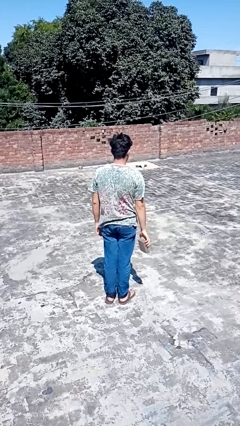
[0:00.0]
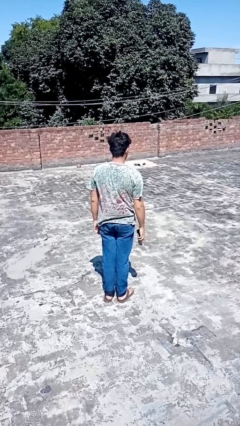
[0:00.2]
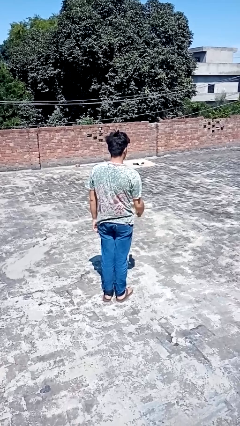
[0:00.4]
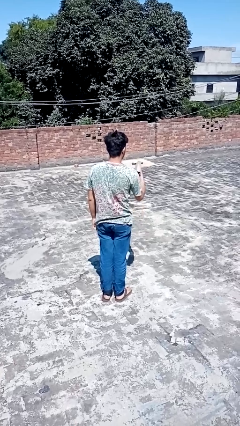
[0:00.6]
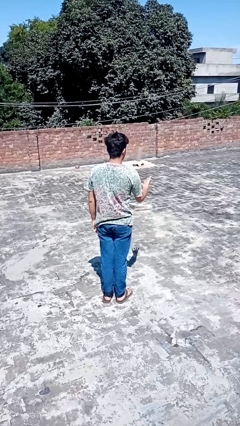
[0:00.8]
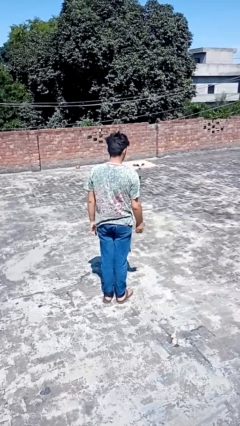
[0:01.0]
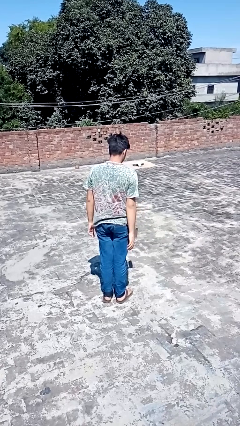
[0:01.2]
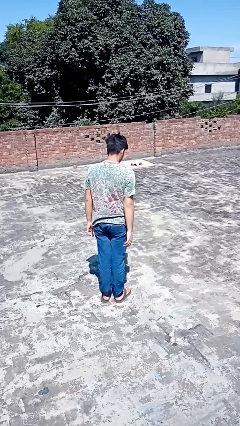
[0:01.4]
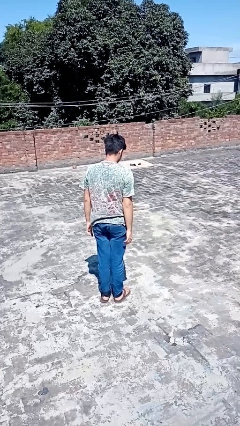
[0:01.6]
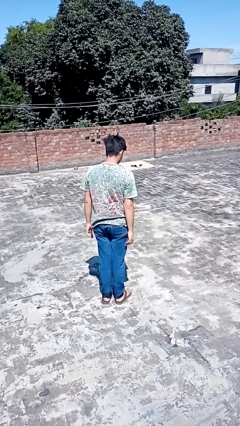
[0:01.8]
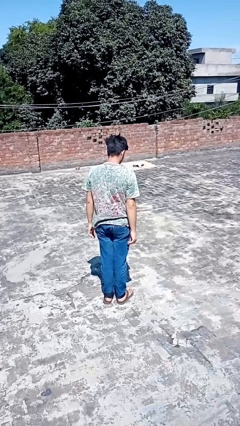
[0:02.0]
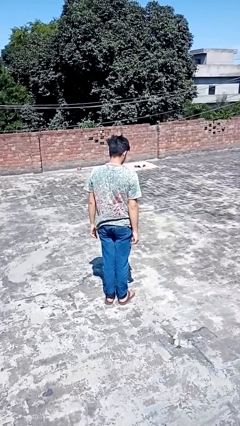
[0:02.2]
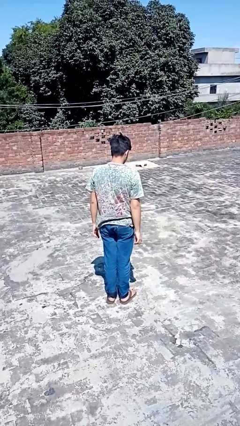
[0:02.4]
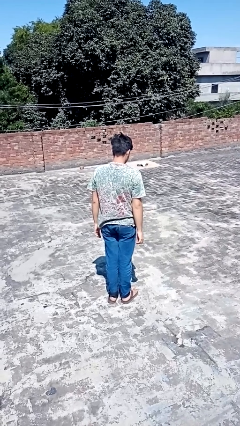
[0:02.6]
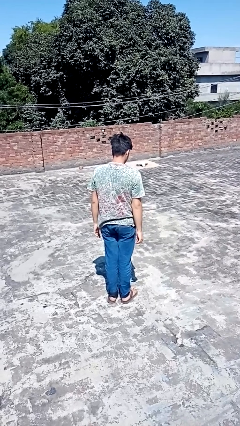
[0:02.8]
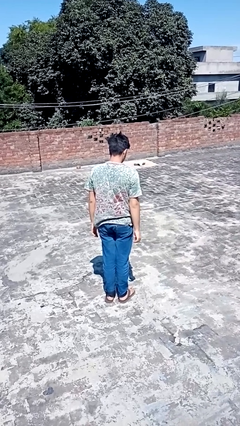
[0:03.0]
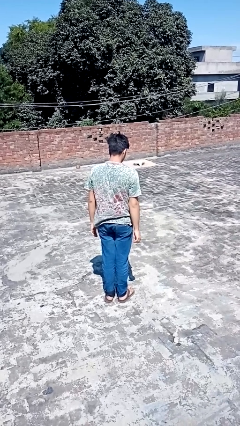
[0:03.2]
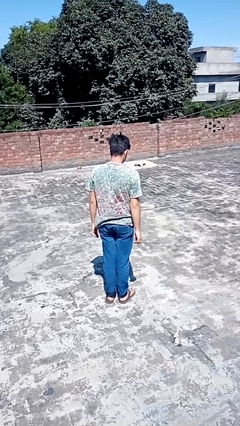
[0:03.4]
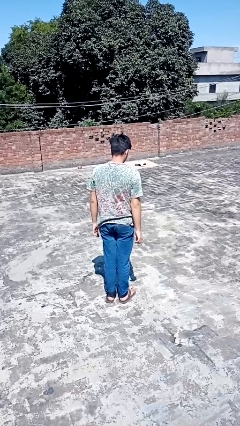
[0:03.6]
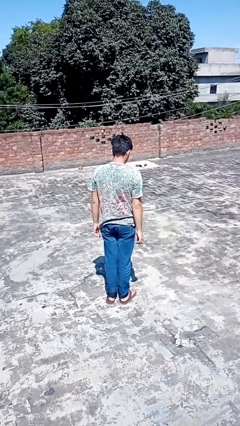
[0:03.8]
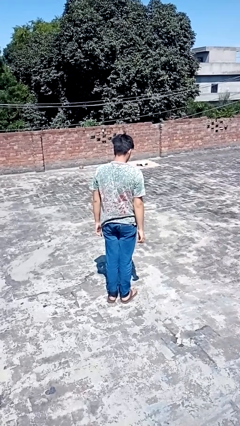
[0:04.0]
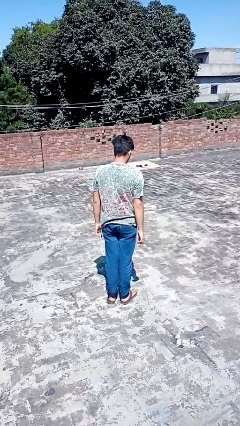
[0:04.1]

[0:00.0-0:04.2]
person throws object into air

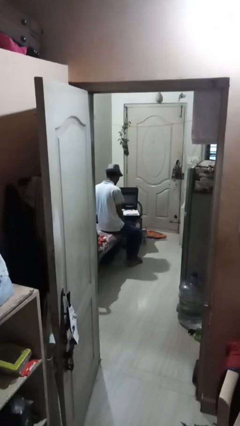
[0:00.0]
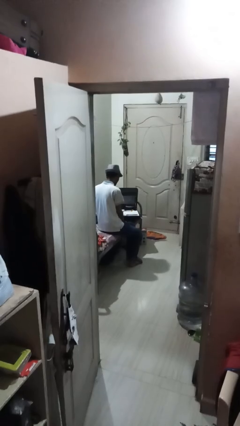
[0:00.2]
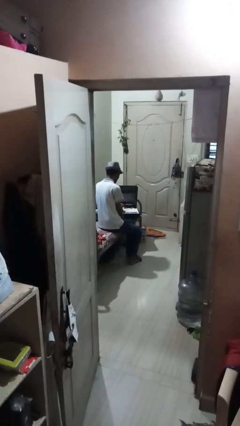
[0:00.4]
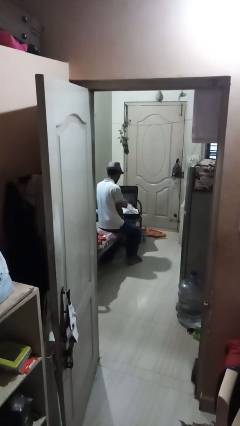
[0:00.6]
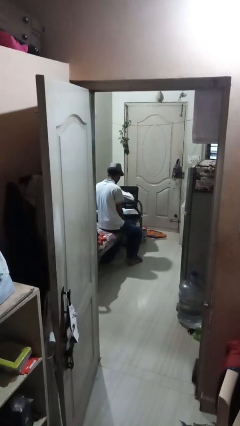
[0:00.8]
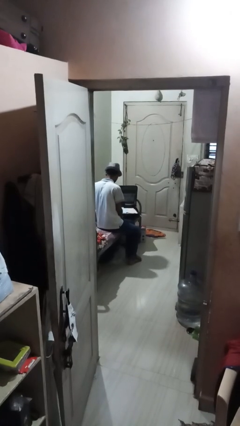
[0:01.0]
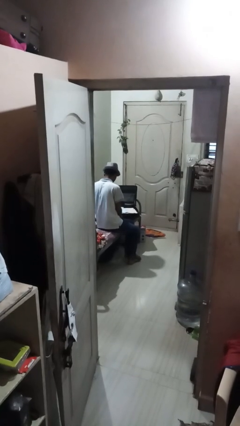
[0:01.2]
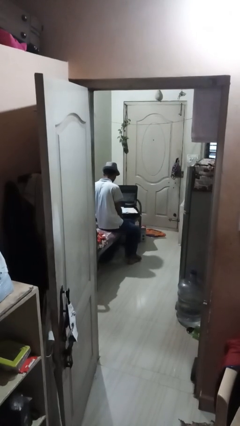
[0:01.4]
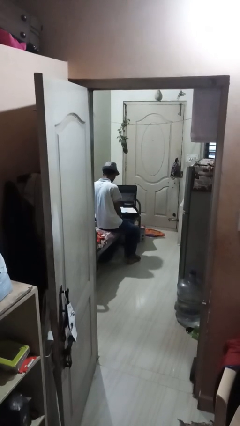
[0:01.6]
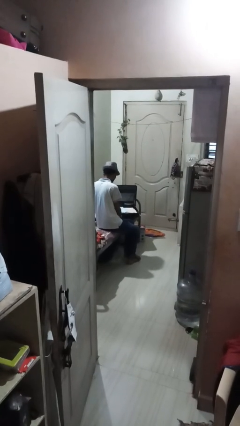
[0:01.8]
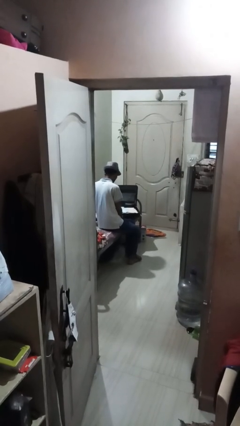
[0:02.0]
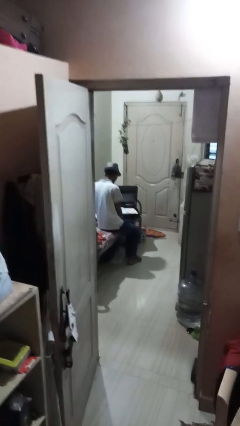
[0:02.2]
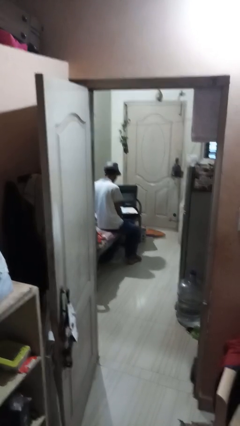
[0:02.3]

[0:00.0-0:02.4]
person unloads clothes from suitcase

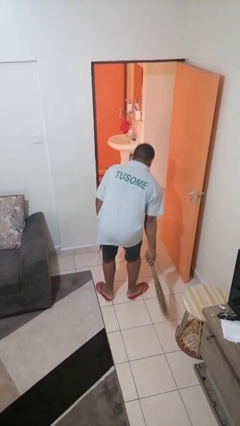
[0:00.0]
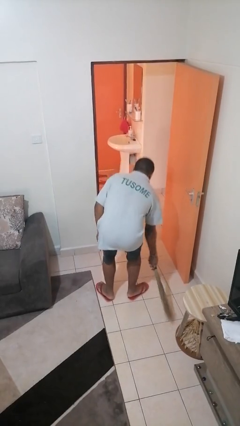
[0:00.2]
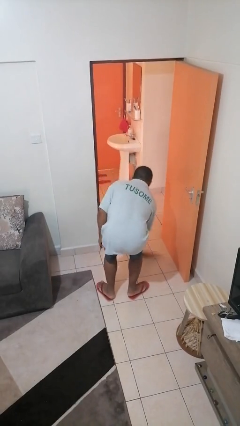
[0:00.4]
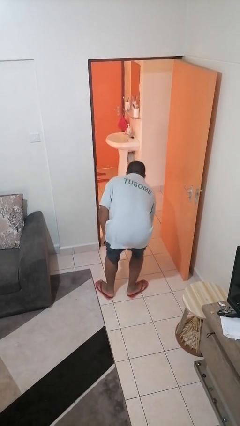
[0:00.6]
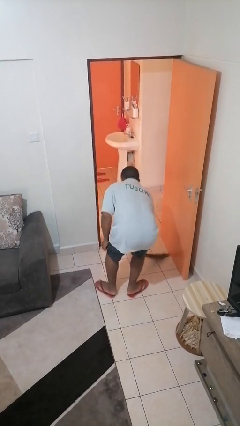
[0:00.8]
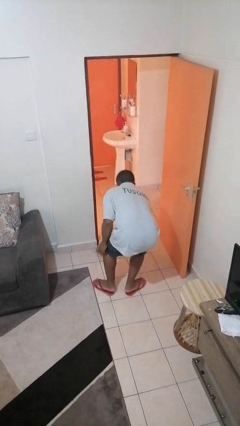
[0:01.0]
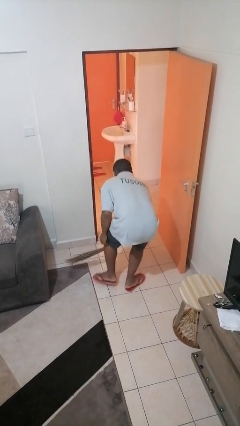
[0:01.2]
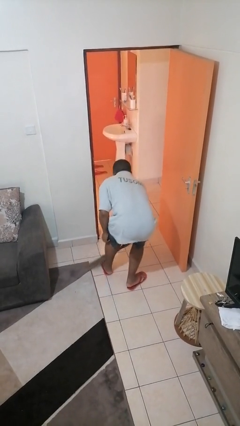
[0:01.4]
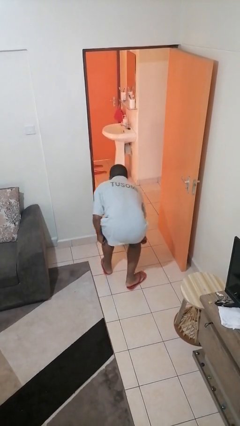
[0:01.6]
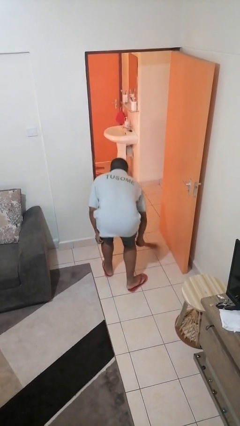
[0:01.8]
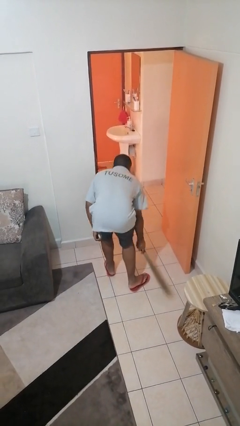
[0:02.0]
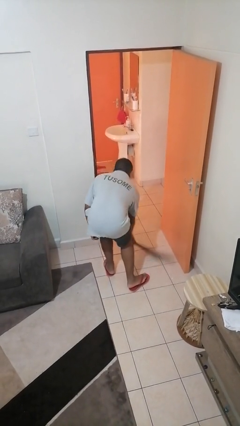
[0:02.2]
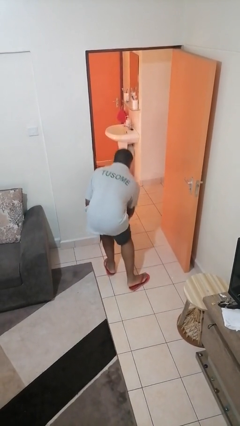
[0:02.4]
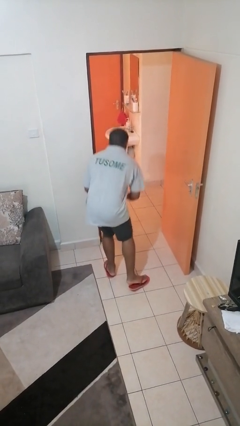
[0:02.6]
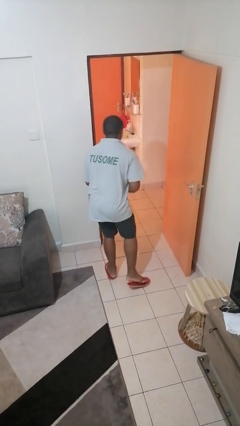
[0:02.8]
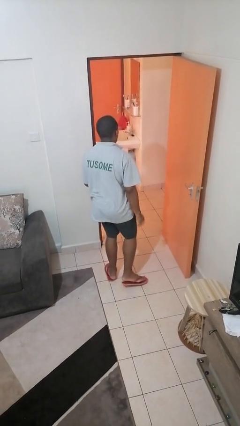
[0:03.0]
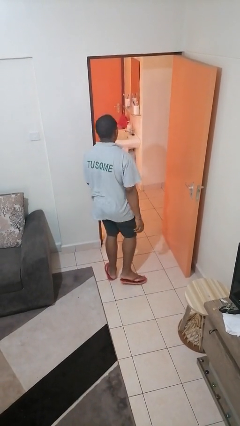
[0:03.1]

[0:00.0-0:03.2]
person sweeps floor

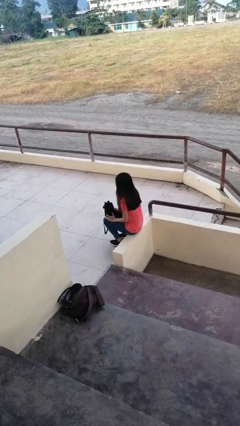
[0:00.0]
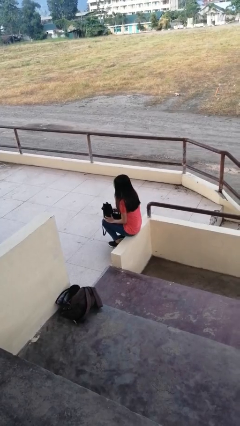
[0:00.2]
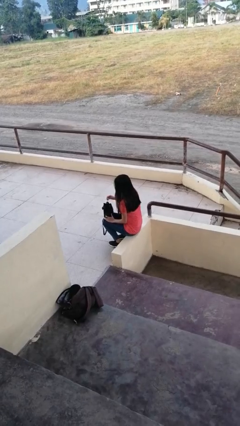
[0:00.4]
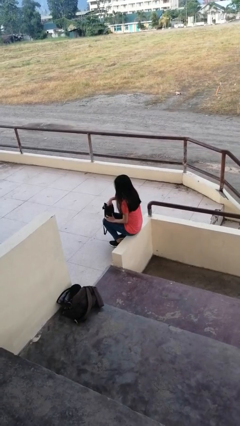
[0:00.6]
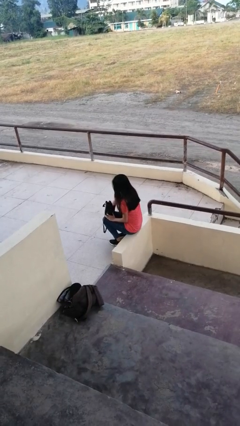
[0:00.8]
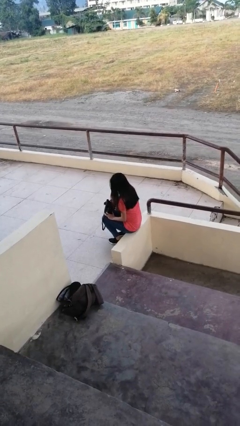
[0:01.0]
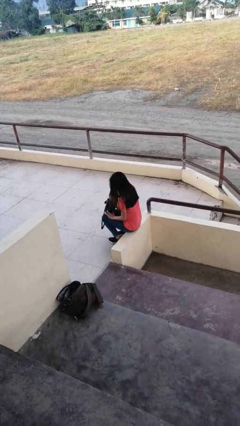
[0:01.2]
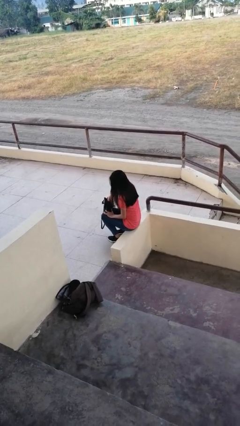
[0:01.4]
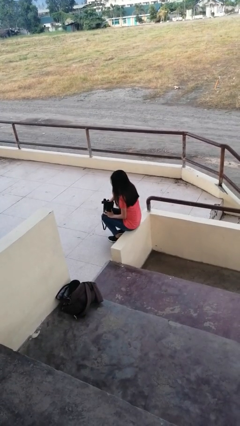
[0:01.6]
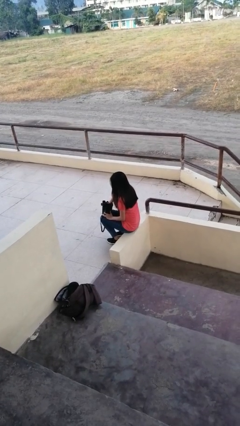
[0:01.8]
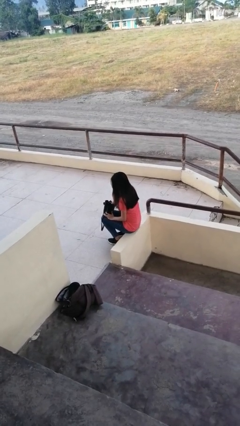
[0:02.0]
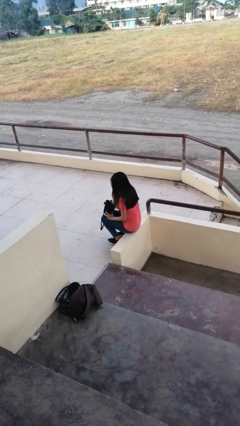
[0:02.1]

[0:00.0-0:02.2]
person searches in purse

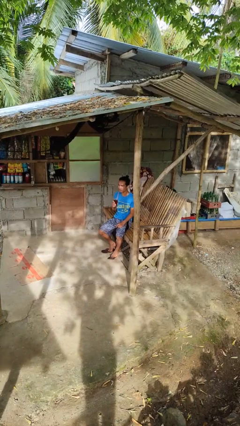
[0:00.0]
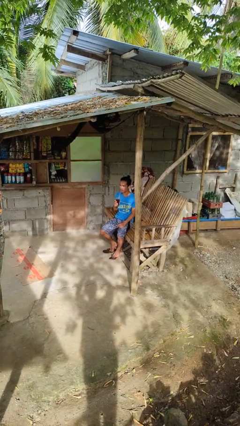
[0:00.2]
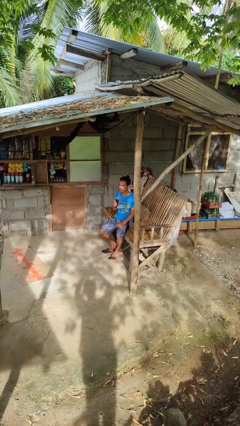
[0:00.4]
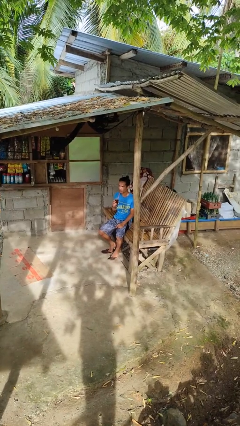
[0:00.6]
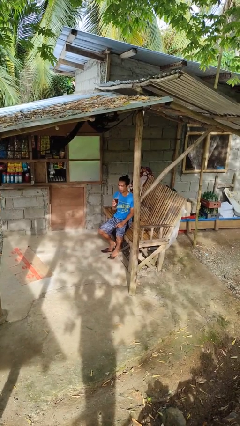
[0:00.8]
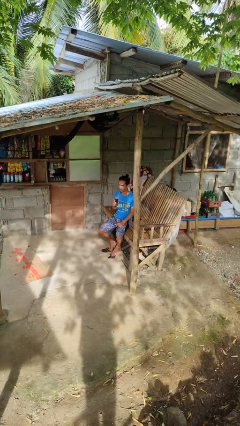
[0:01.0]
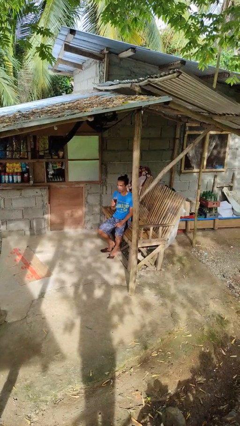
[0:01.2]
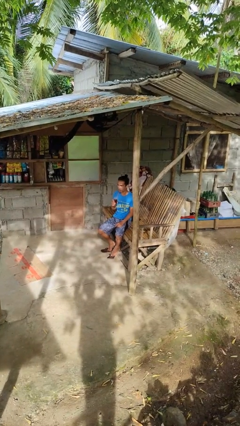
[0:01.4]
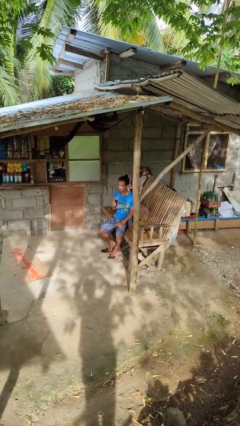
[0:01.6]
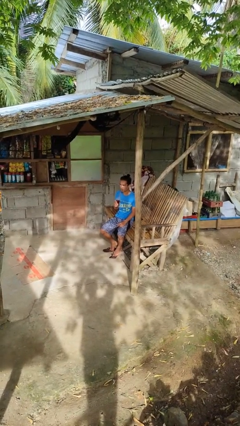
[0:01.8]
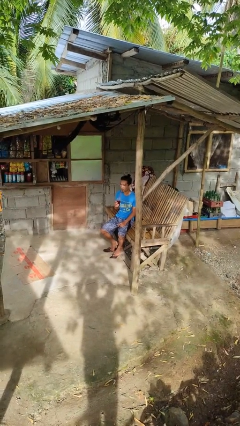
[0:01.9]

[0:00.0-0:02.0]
person drinks from straw

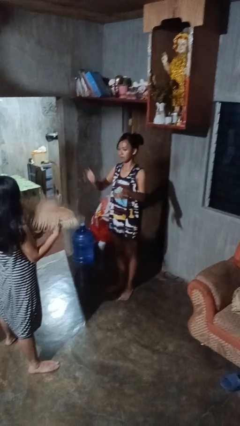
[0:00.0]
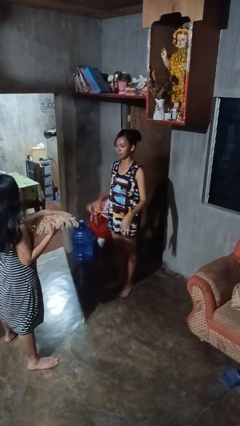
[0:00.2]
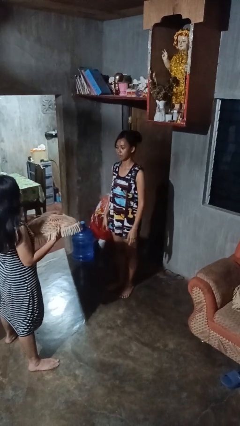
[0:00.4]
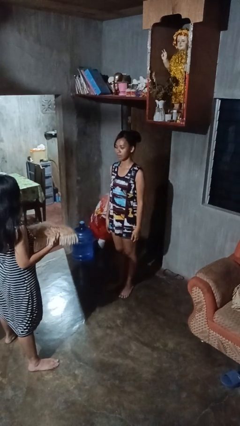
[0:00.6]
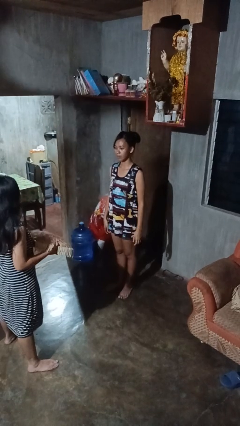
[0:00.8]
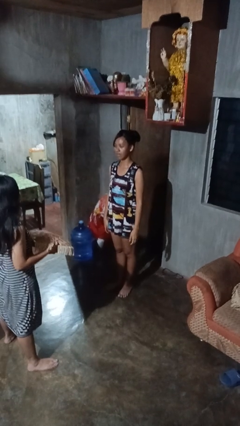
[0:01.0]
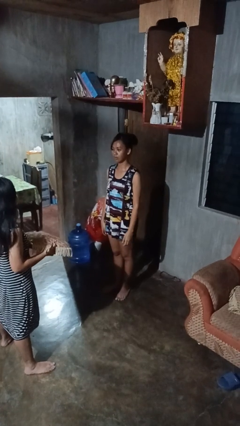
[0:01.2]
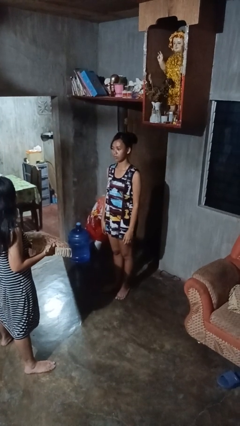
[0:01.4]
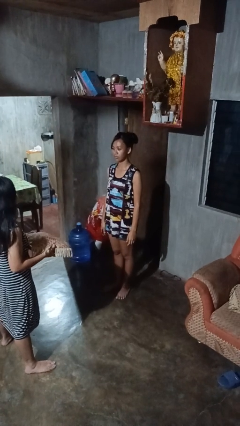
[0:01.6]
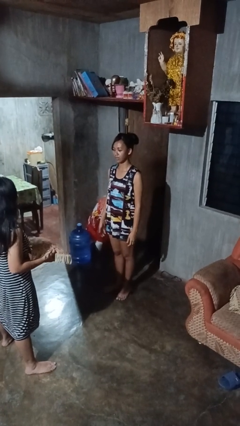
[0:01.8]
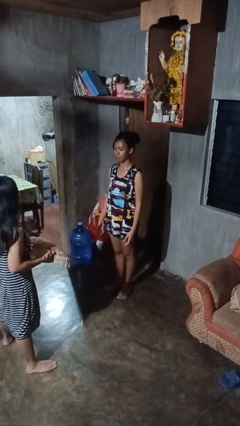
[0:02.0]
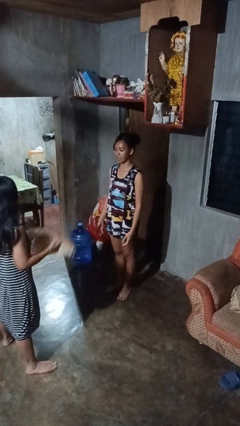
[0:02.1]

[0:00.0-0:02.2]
person throws object to person

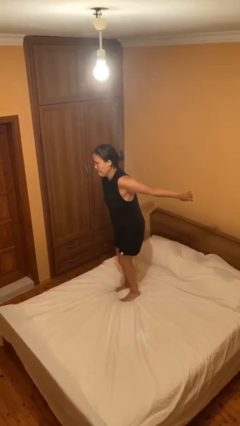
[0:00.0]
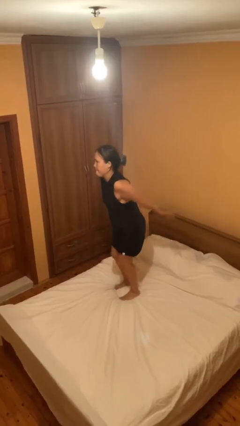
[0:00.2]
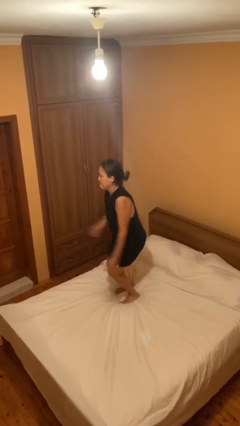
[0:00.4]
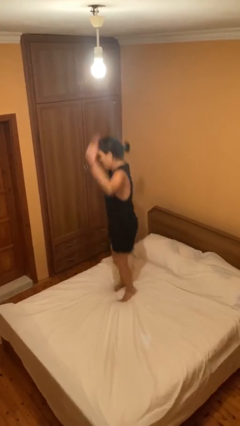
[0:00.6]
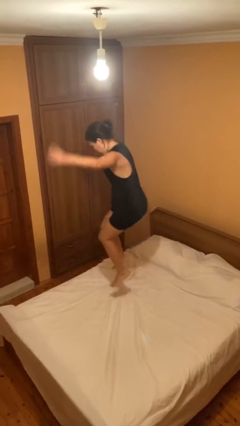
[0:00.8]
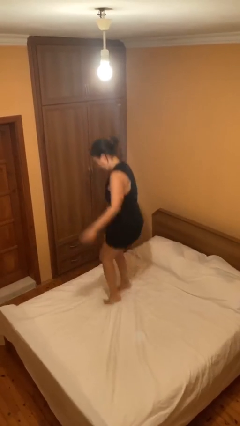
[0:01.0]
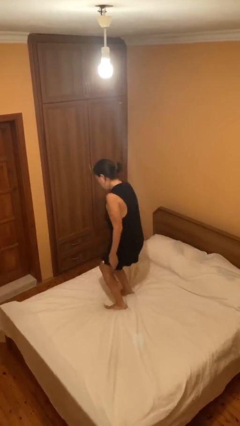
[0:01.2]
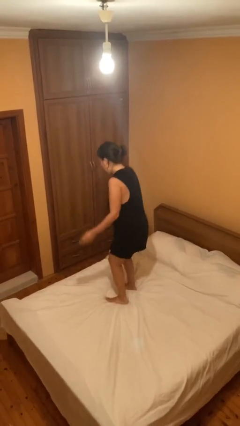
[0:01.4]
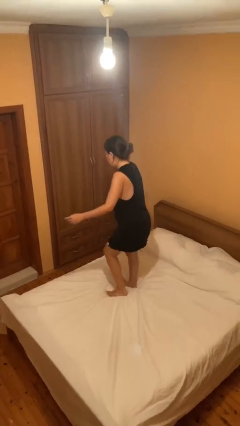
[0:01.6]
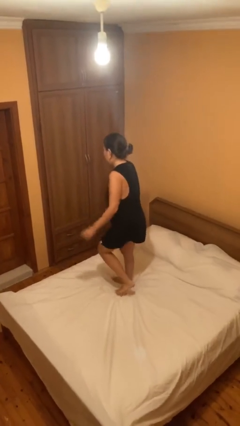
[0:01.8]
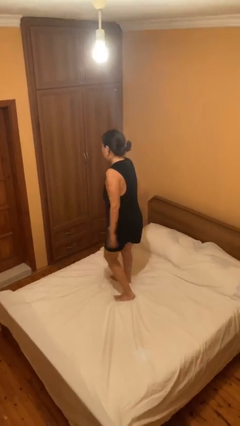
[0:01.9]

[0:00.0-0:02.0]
person jumps on bed
